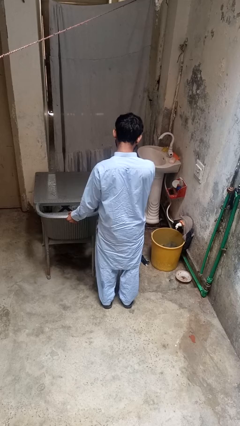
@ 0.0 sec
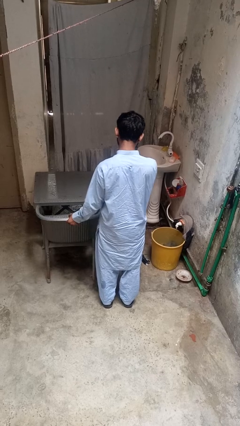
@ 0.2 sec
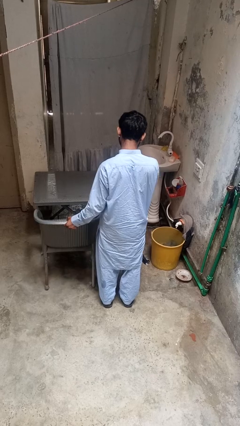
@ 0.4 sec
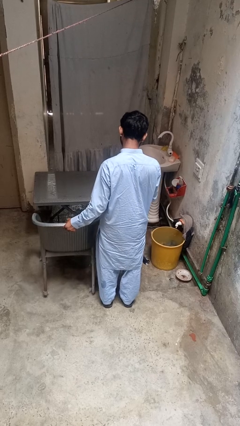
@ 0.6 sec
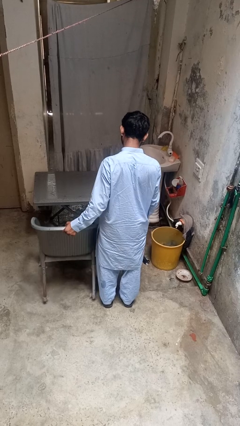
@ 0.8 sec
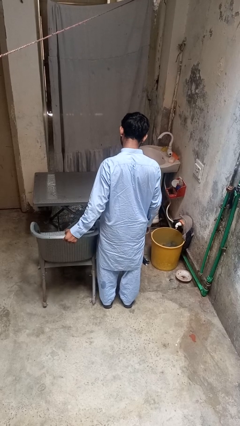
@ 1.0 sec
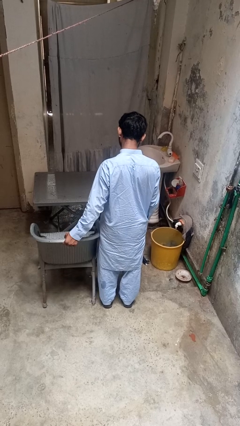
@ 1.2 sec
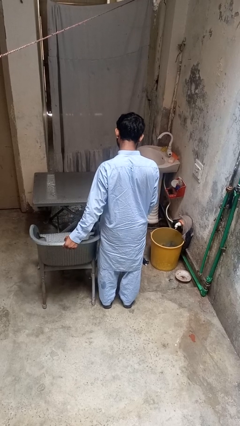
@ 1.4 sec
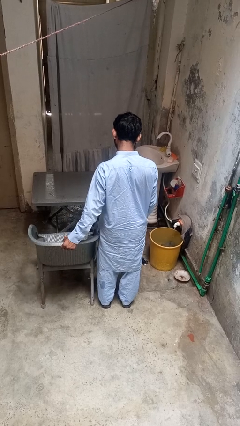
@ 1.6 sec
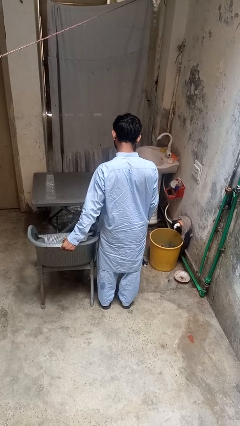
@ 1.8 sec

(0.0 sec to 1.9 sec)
person pulls out chair

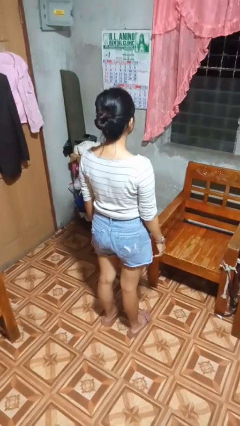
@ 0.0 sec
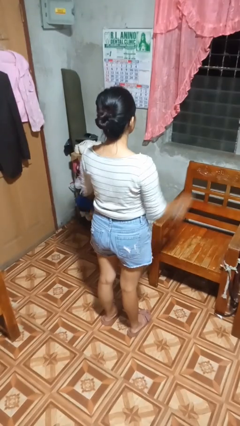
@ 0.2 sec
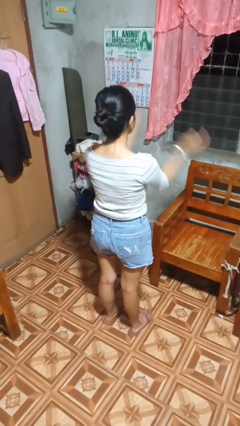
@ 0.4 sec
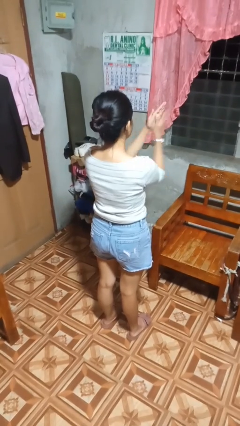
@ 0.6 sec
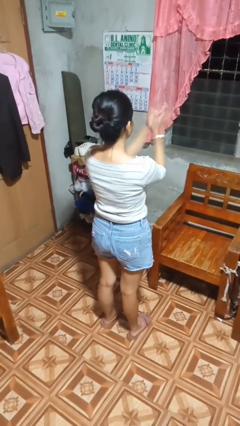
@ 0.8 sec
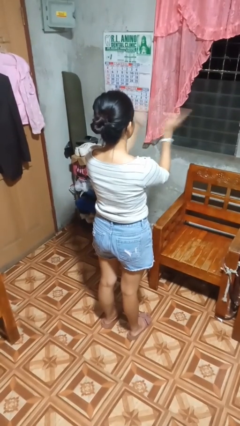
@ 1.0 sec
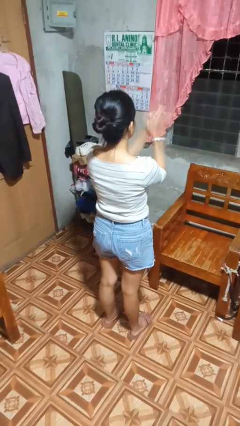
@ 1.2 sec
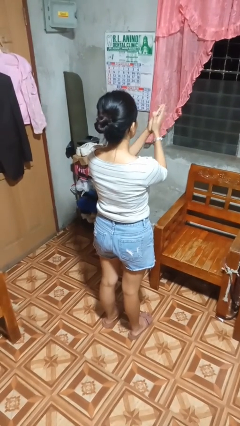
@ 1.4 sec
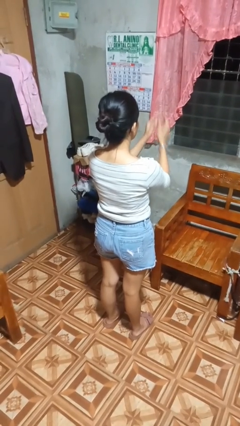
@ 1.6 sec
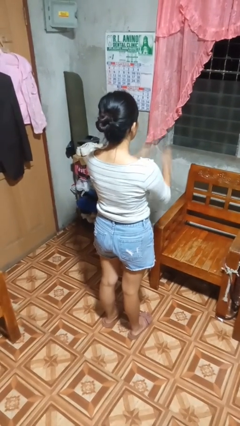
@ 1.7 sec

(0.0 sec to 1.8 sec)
person claps hands

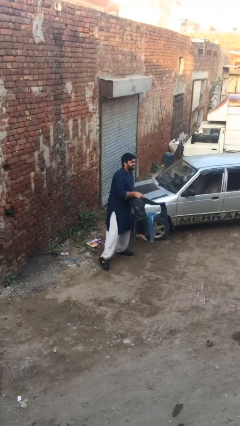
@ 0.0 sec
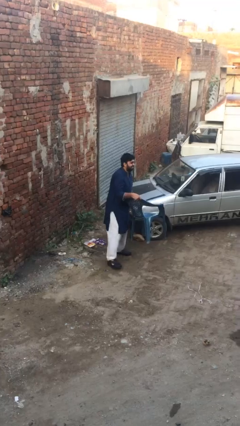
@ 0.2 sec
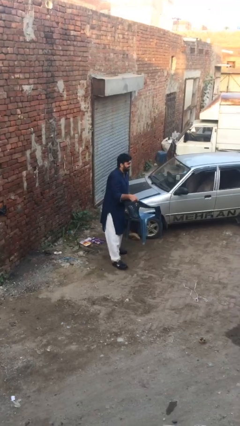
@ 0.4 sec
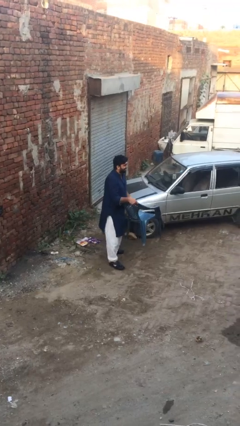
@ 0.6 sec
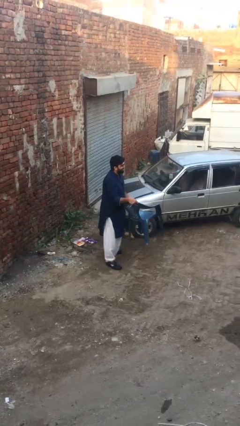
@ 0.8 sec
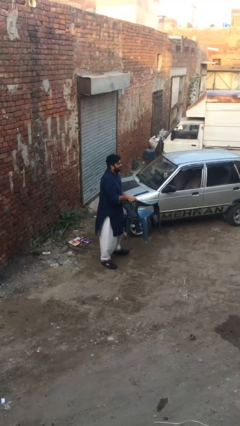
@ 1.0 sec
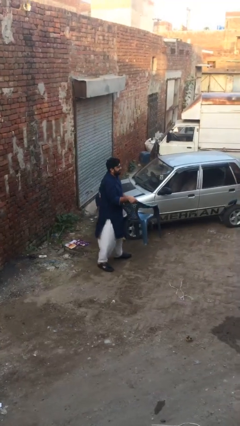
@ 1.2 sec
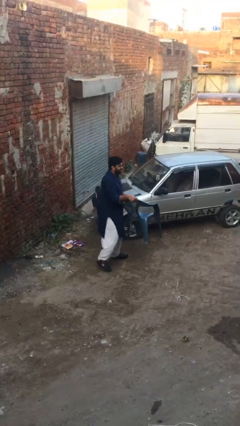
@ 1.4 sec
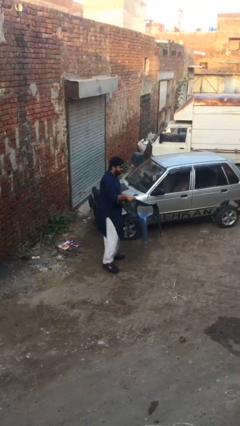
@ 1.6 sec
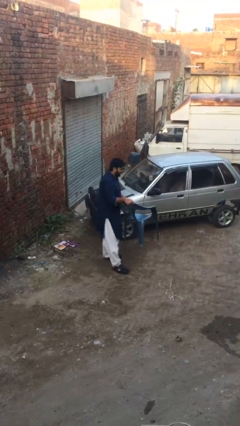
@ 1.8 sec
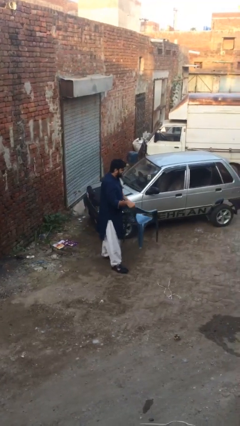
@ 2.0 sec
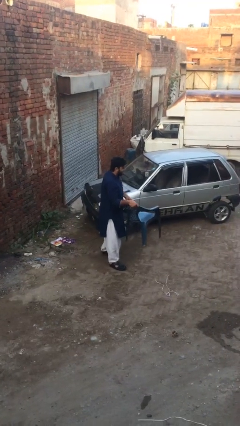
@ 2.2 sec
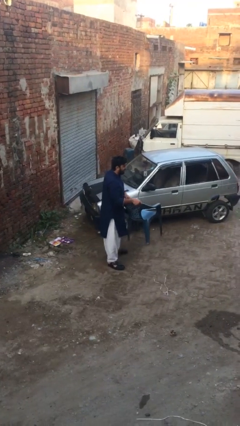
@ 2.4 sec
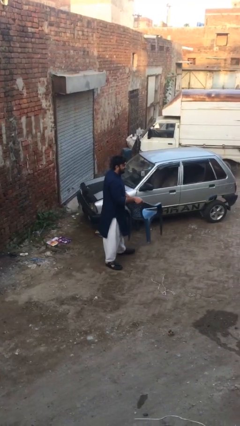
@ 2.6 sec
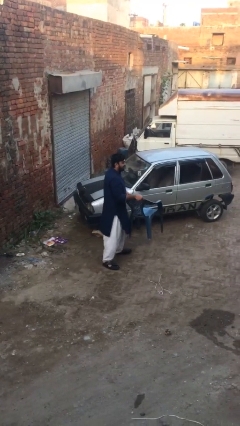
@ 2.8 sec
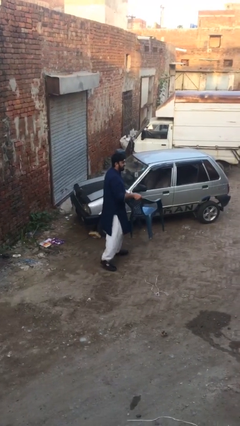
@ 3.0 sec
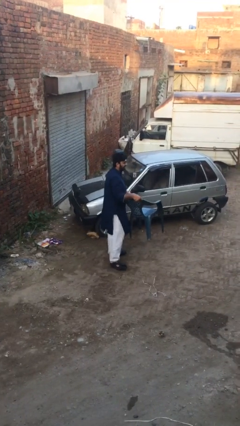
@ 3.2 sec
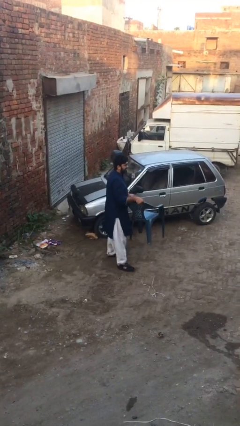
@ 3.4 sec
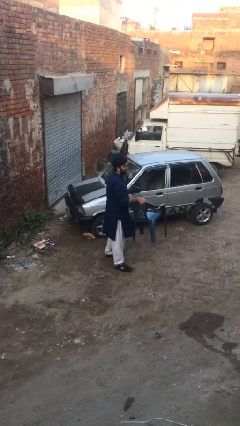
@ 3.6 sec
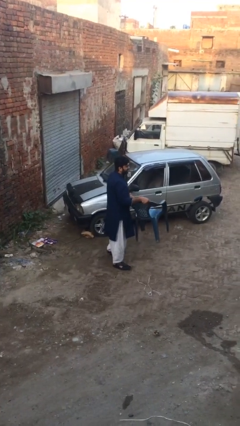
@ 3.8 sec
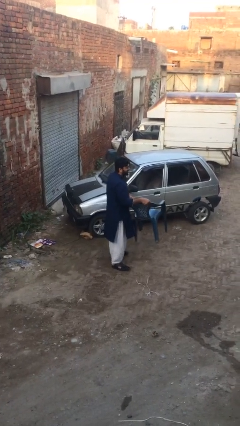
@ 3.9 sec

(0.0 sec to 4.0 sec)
person carries heavy object

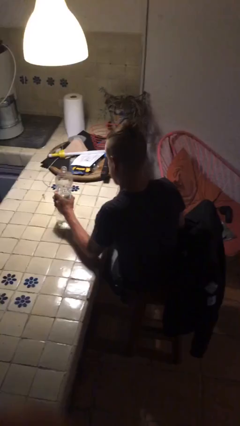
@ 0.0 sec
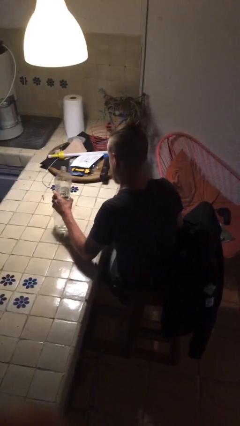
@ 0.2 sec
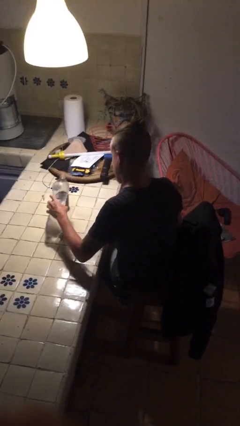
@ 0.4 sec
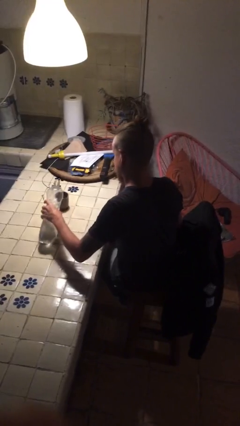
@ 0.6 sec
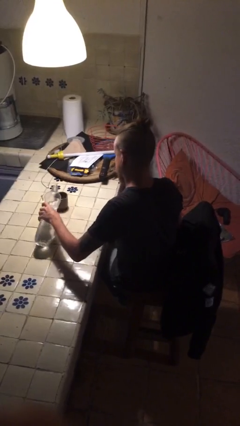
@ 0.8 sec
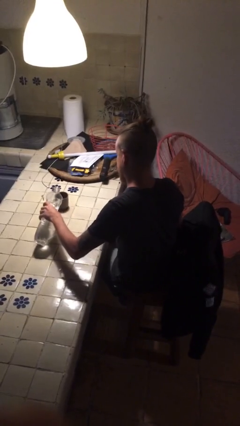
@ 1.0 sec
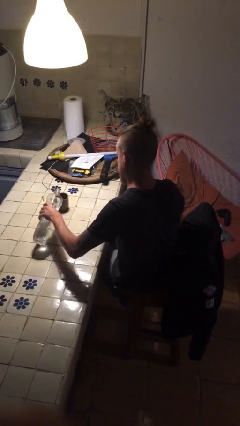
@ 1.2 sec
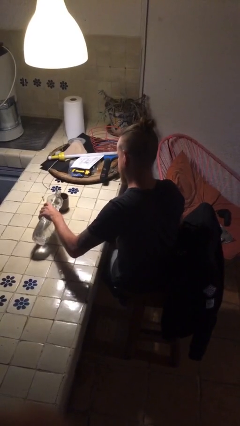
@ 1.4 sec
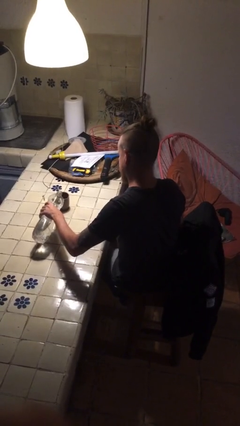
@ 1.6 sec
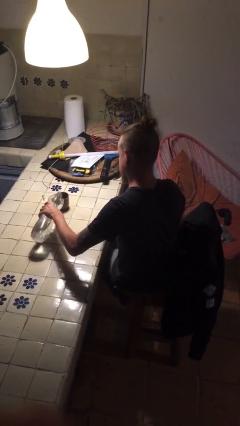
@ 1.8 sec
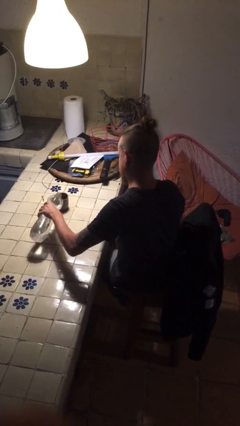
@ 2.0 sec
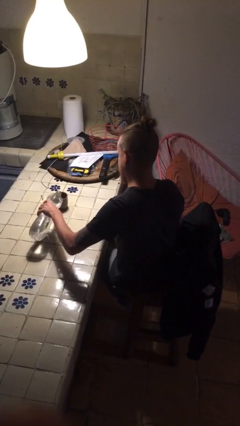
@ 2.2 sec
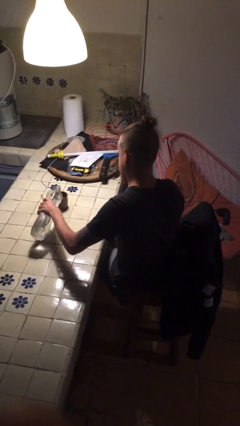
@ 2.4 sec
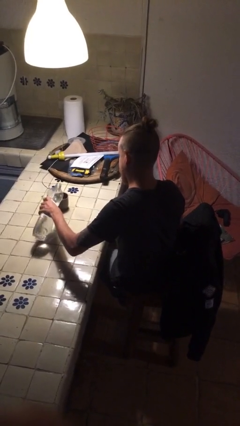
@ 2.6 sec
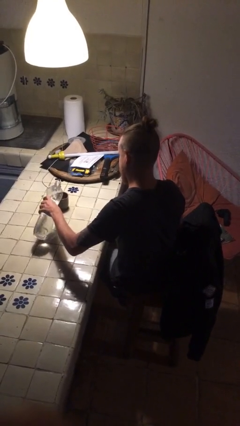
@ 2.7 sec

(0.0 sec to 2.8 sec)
person pours liquid into cup

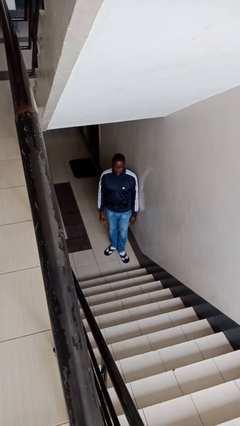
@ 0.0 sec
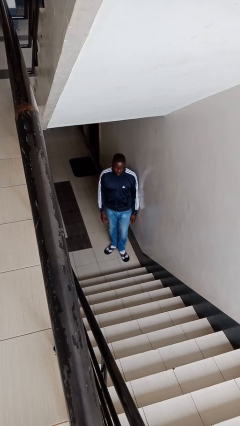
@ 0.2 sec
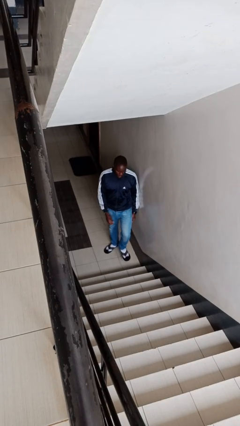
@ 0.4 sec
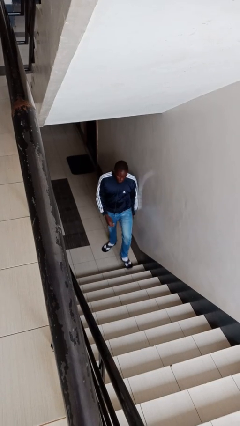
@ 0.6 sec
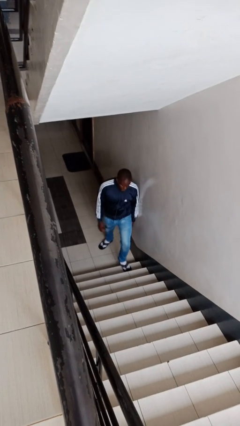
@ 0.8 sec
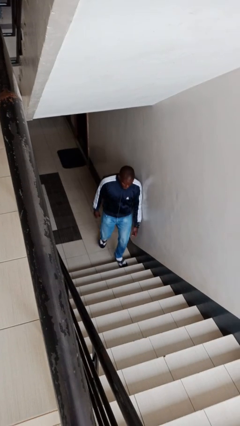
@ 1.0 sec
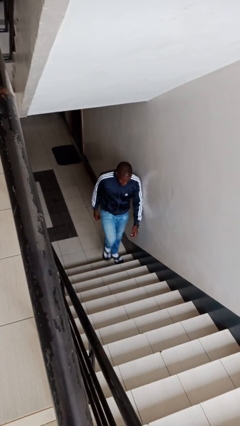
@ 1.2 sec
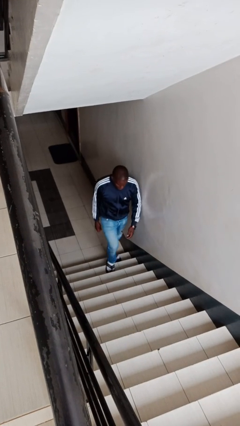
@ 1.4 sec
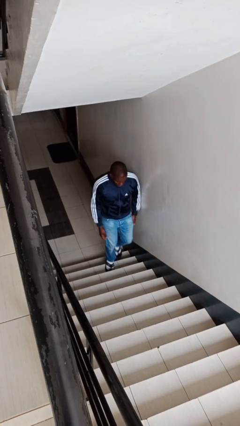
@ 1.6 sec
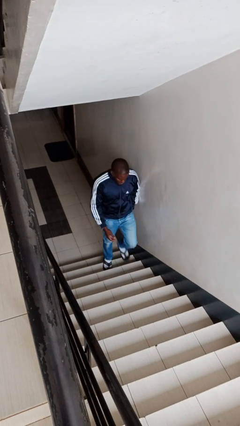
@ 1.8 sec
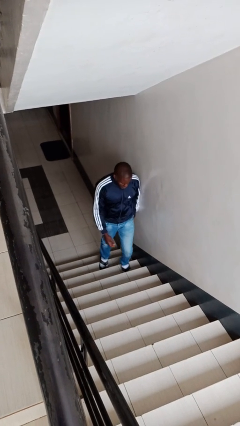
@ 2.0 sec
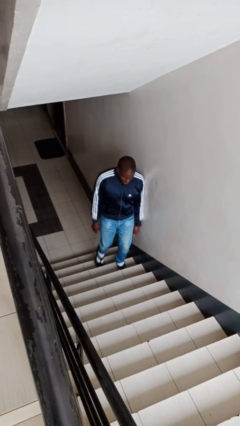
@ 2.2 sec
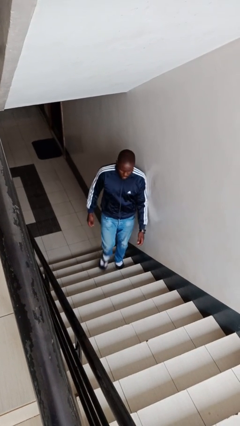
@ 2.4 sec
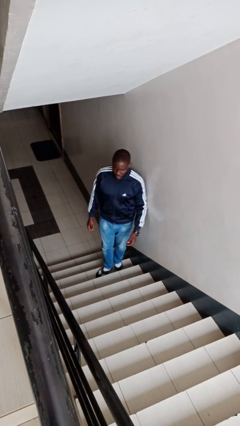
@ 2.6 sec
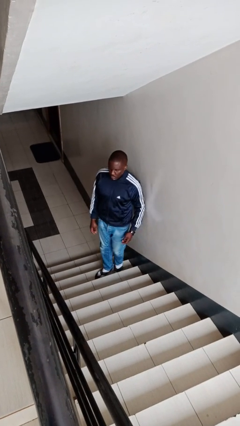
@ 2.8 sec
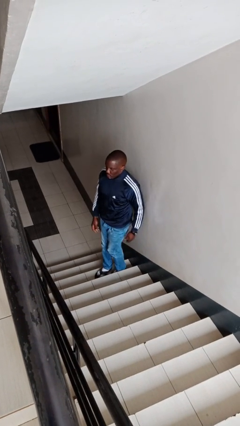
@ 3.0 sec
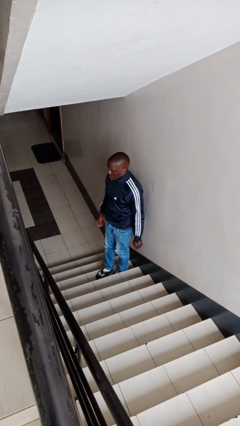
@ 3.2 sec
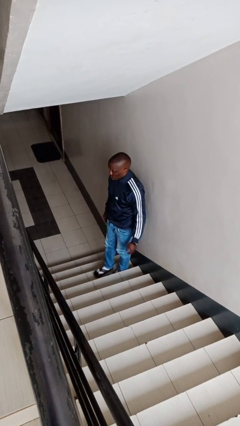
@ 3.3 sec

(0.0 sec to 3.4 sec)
person climbs up stairs

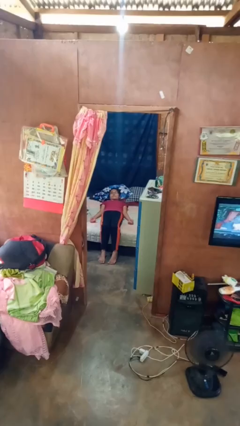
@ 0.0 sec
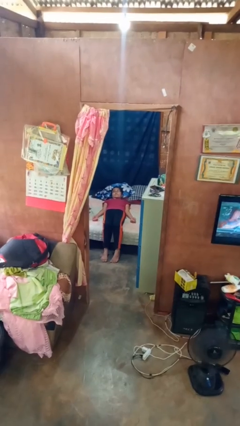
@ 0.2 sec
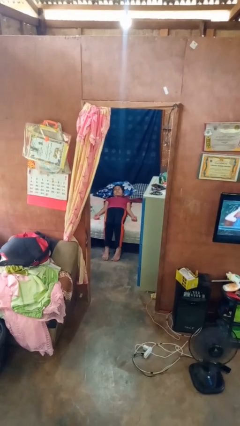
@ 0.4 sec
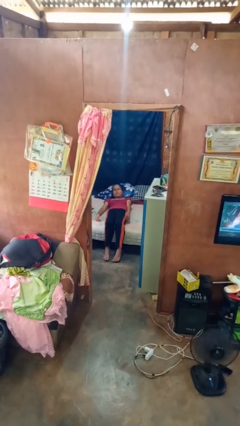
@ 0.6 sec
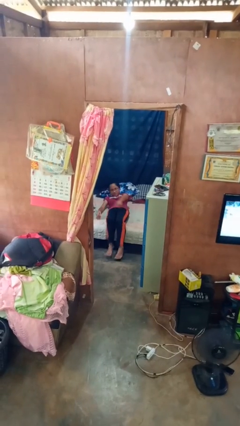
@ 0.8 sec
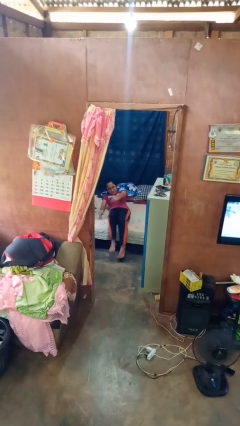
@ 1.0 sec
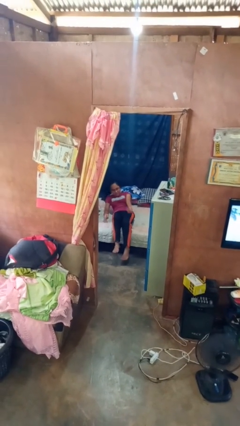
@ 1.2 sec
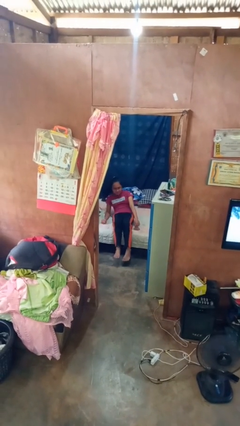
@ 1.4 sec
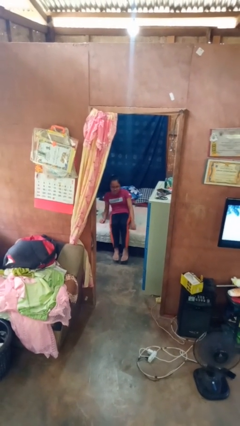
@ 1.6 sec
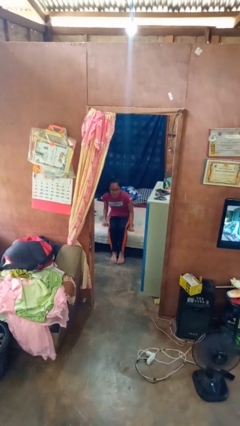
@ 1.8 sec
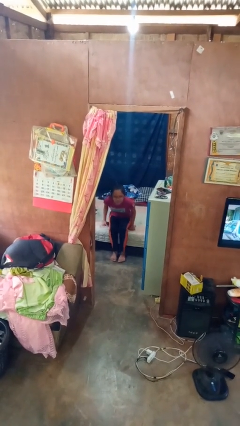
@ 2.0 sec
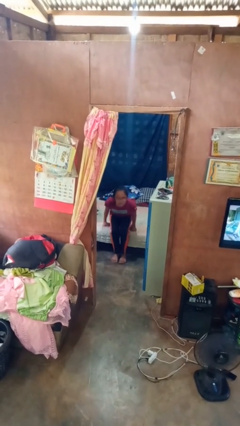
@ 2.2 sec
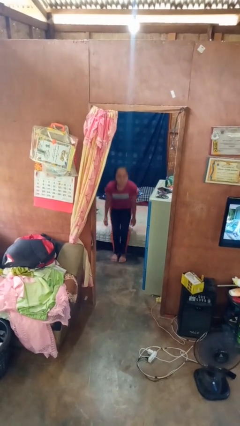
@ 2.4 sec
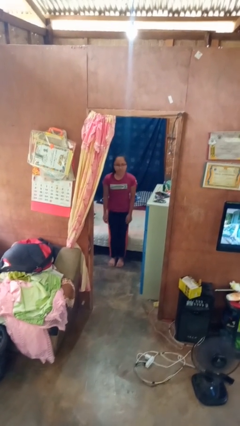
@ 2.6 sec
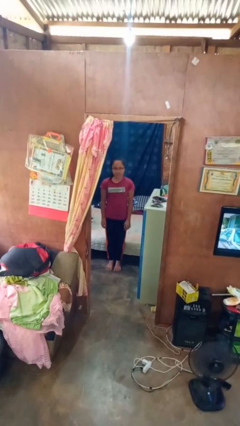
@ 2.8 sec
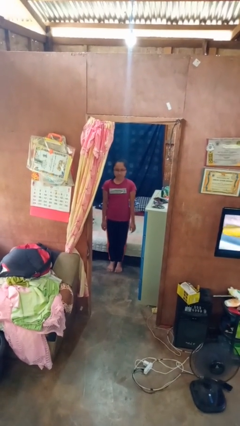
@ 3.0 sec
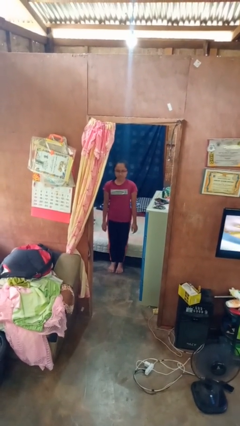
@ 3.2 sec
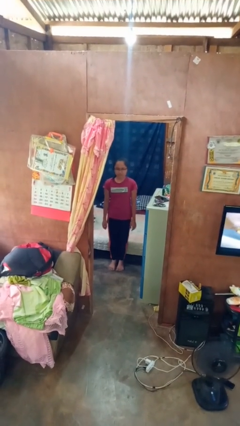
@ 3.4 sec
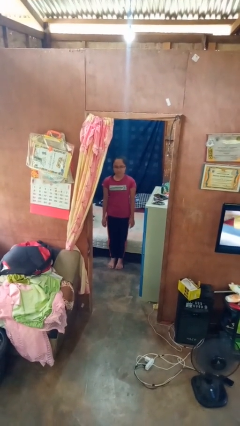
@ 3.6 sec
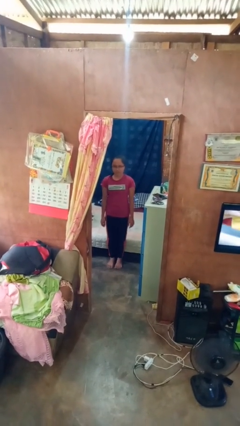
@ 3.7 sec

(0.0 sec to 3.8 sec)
person stands up
